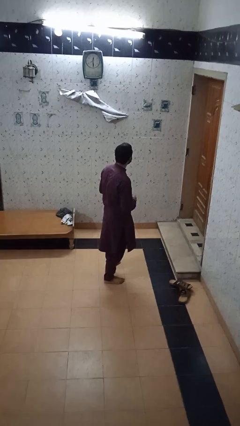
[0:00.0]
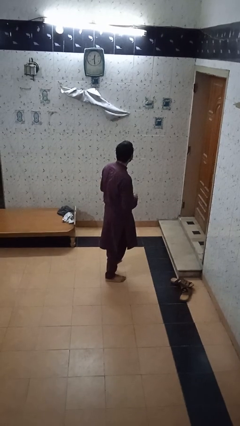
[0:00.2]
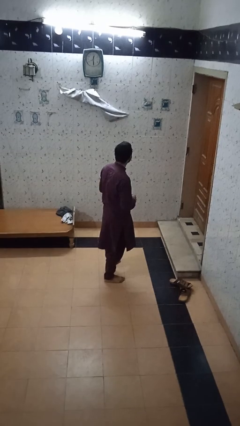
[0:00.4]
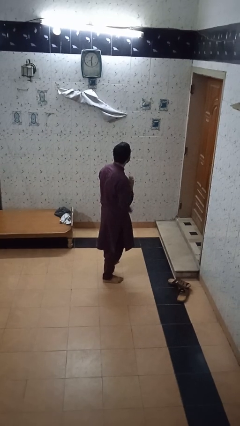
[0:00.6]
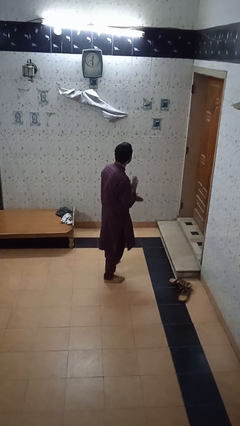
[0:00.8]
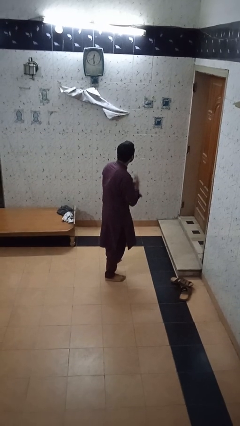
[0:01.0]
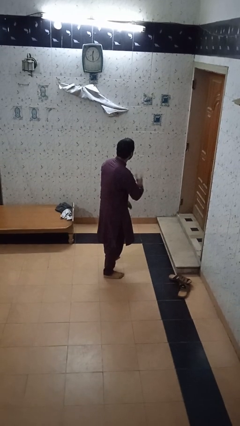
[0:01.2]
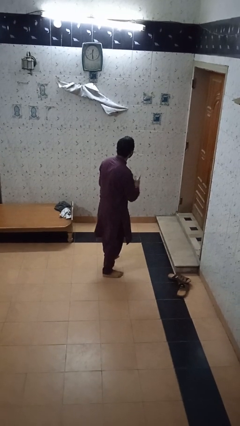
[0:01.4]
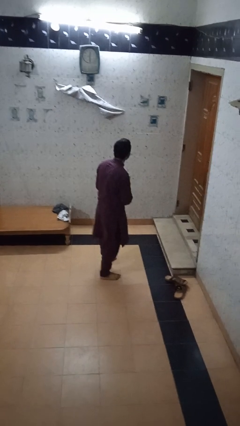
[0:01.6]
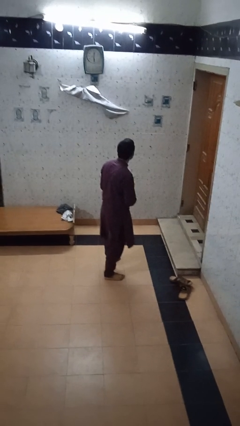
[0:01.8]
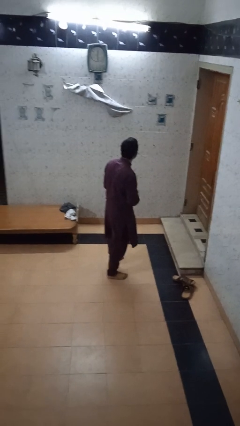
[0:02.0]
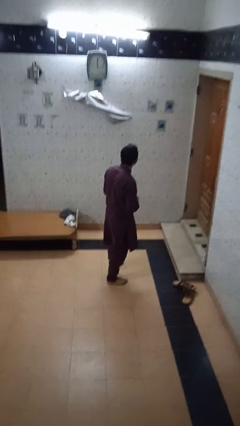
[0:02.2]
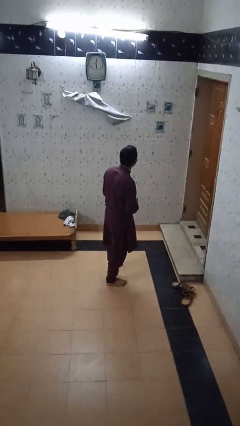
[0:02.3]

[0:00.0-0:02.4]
person karate chop

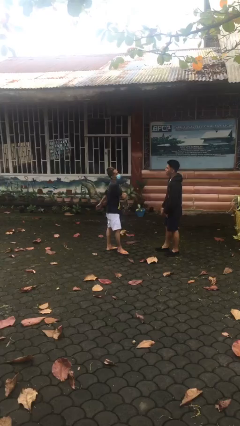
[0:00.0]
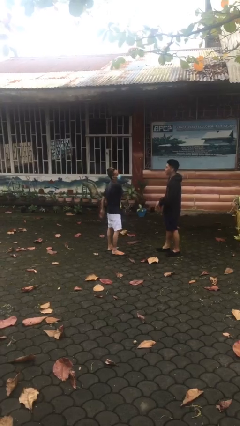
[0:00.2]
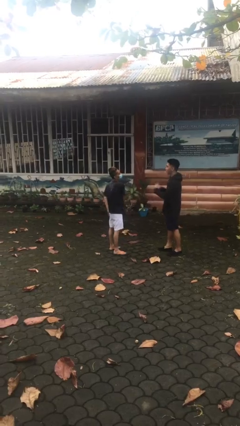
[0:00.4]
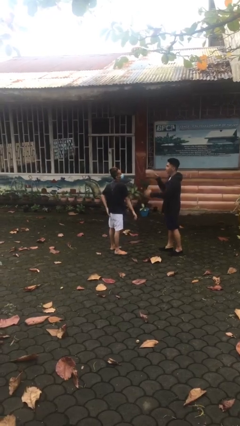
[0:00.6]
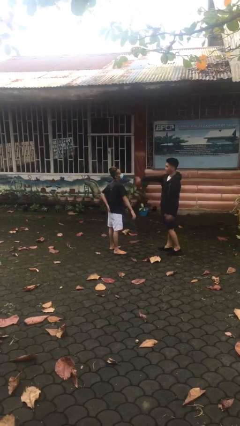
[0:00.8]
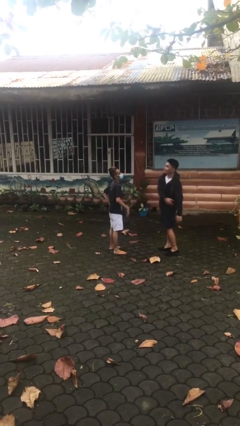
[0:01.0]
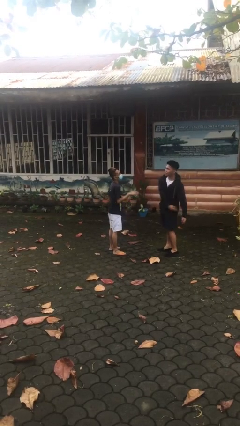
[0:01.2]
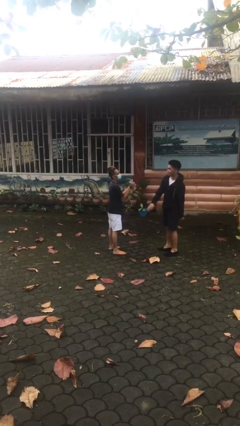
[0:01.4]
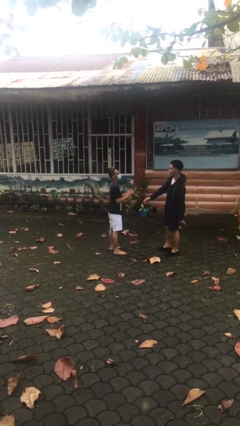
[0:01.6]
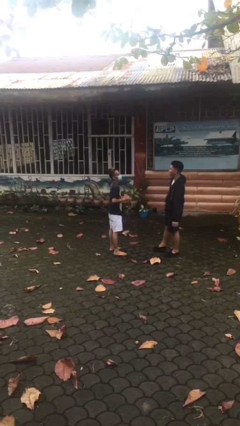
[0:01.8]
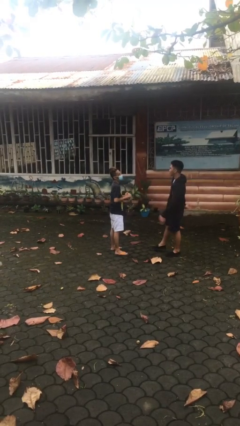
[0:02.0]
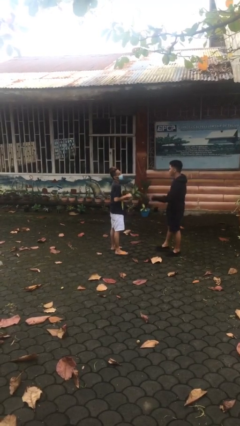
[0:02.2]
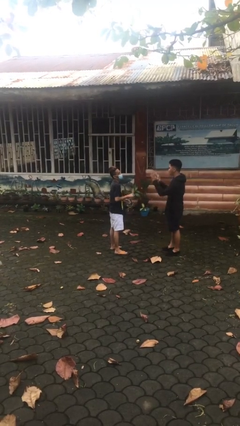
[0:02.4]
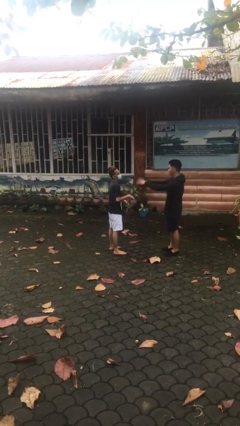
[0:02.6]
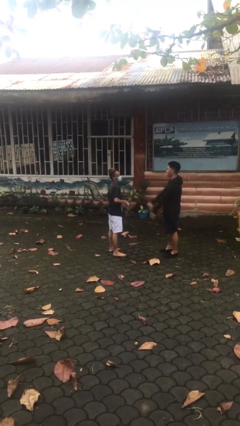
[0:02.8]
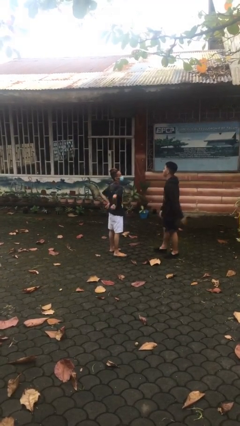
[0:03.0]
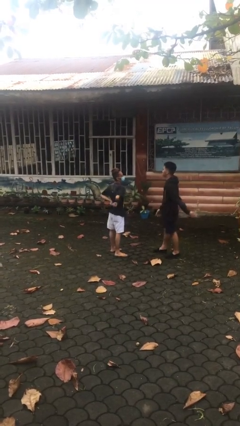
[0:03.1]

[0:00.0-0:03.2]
person talks to person

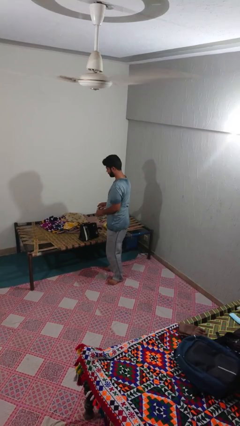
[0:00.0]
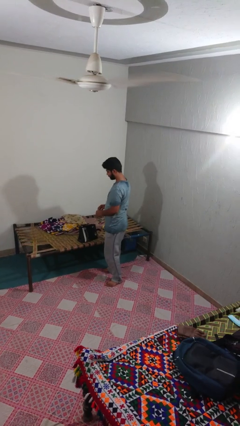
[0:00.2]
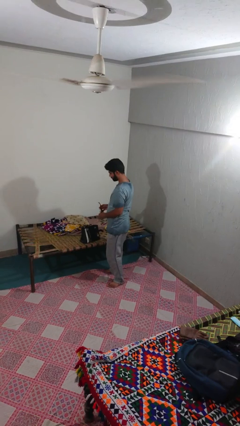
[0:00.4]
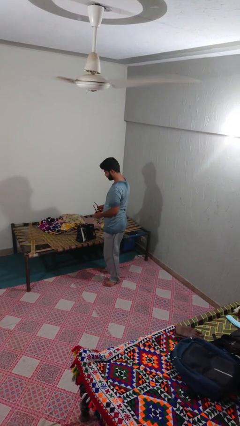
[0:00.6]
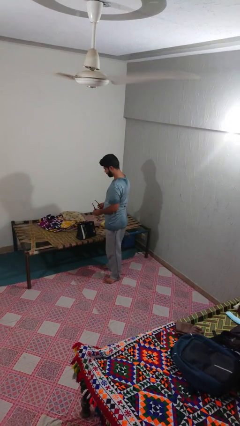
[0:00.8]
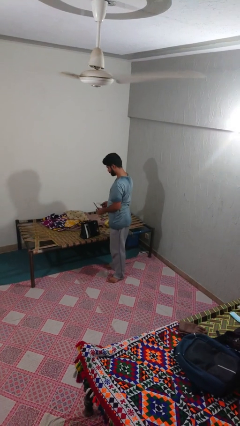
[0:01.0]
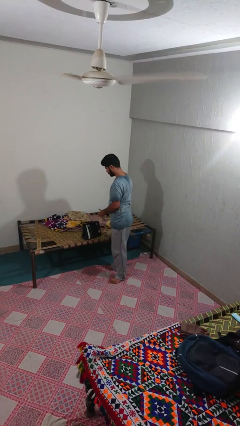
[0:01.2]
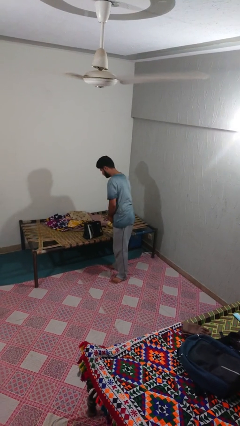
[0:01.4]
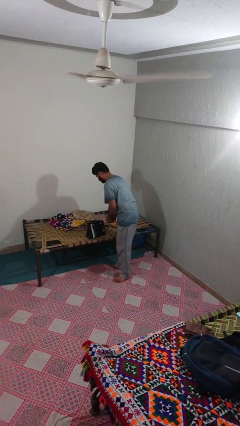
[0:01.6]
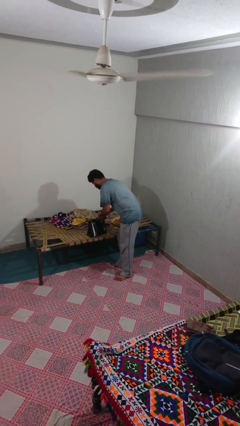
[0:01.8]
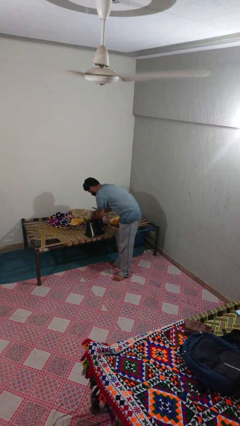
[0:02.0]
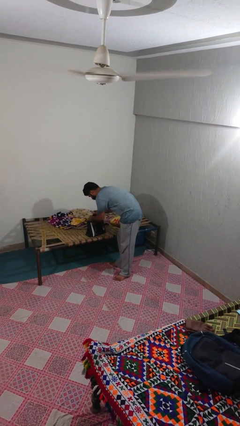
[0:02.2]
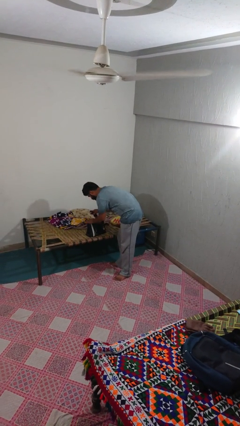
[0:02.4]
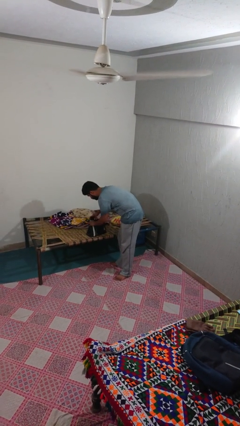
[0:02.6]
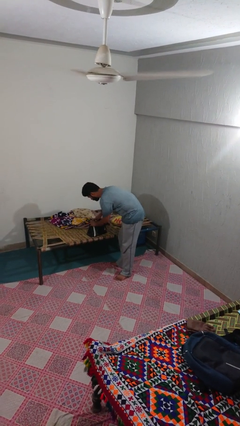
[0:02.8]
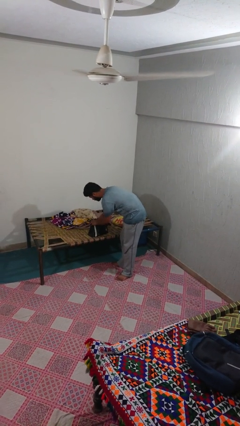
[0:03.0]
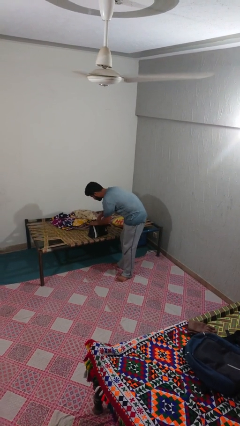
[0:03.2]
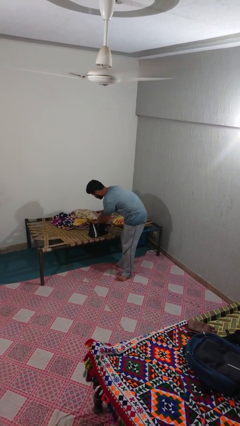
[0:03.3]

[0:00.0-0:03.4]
person puts object into purse

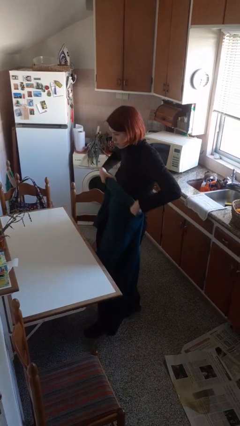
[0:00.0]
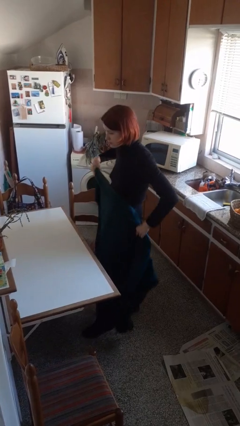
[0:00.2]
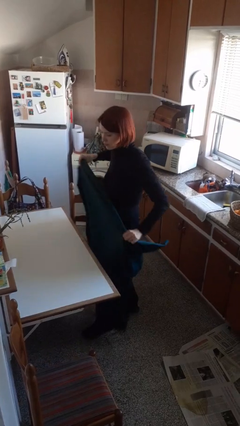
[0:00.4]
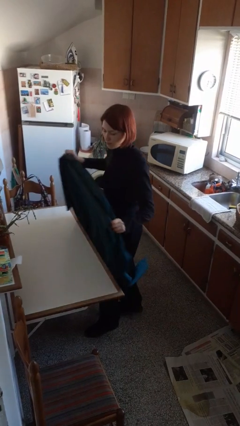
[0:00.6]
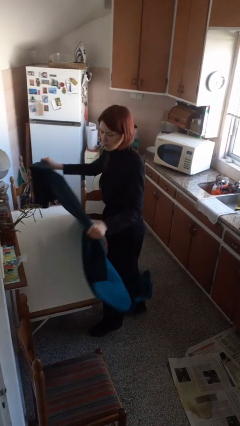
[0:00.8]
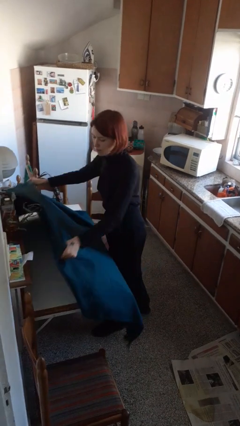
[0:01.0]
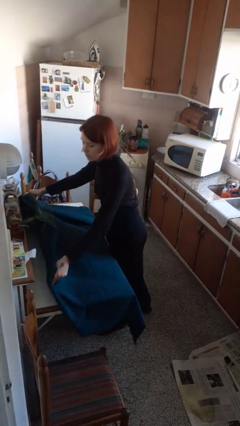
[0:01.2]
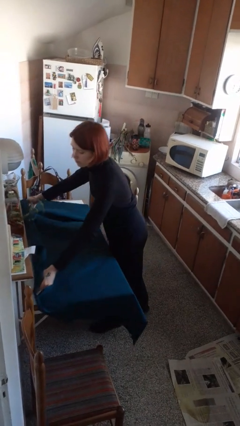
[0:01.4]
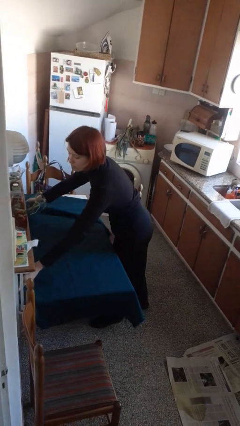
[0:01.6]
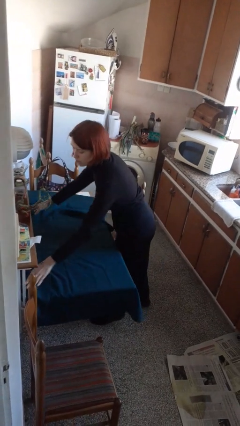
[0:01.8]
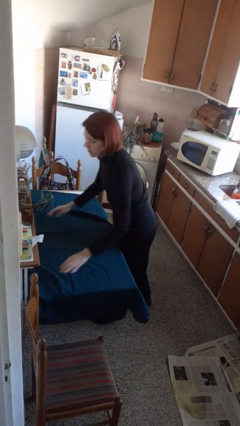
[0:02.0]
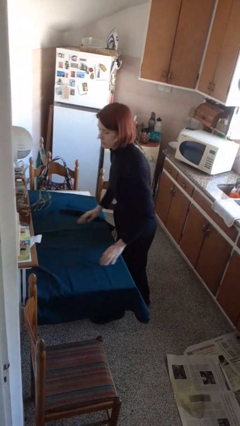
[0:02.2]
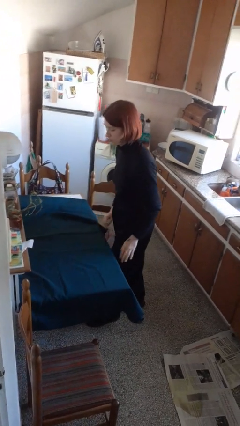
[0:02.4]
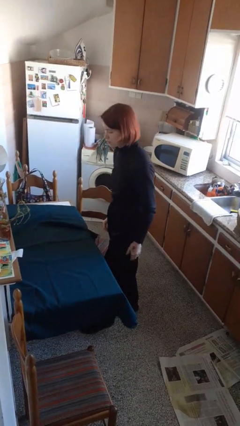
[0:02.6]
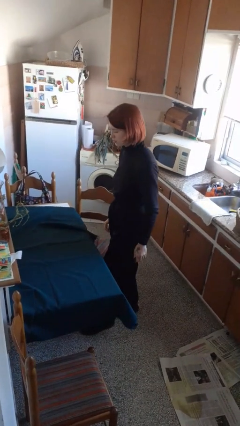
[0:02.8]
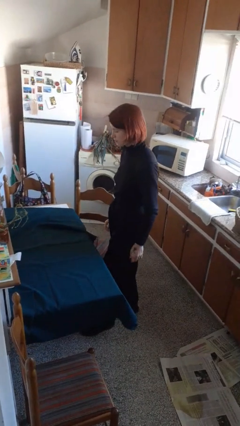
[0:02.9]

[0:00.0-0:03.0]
person spreads tablecloth

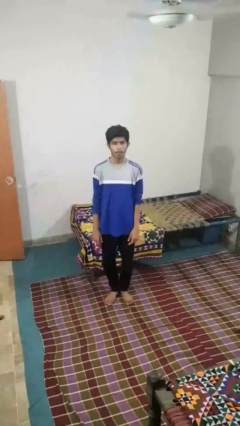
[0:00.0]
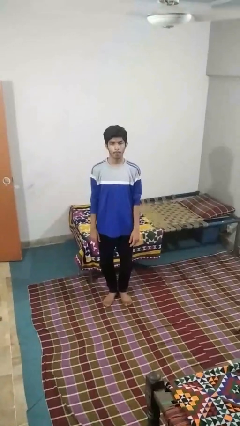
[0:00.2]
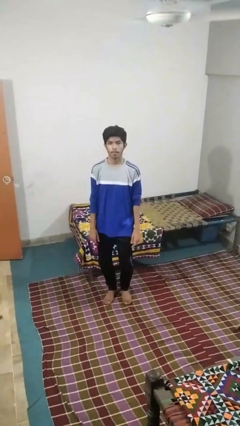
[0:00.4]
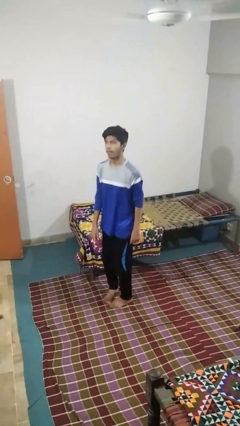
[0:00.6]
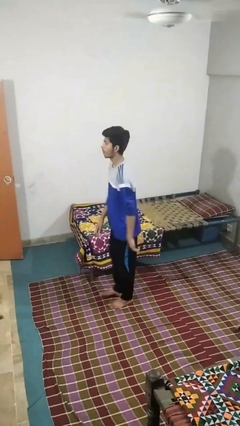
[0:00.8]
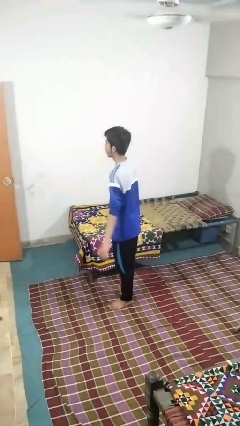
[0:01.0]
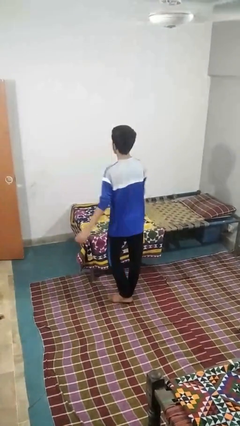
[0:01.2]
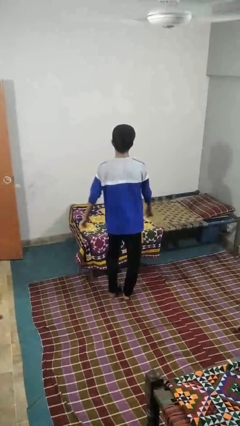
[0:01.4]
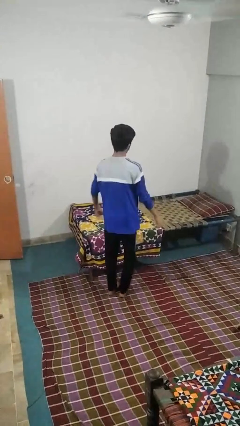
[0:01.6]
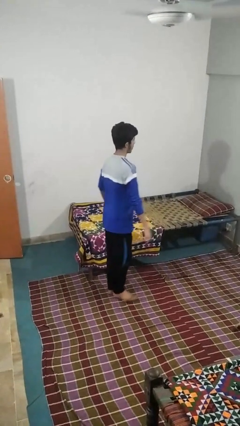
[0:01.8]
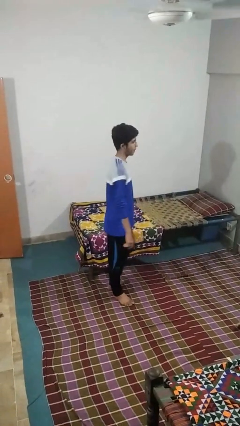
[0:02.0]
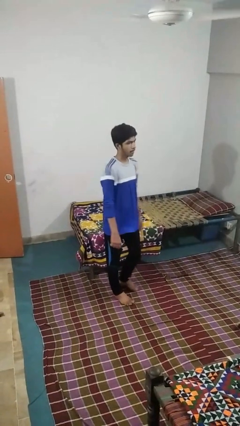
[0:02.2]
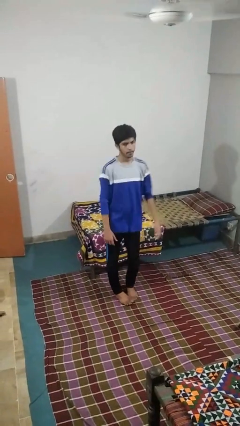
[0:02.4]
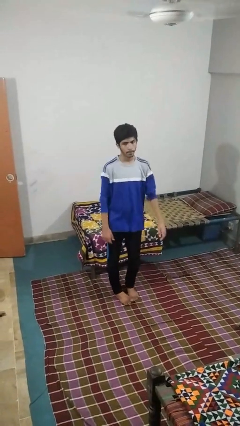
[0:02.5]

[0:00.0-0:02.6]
person twirls

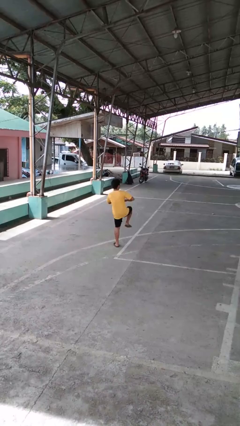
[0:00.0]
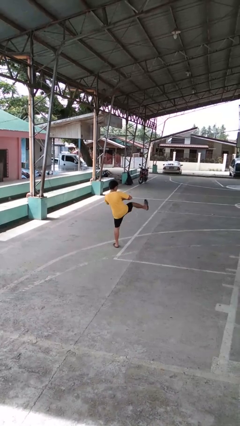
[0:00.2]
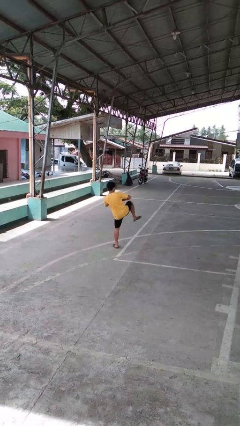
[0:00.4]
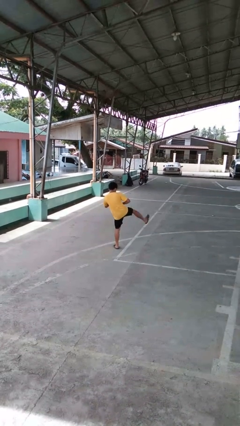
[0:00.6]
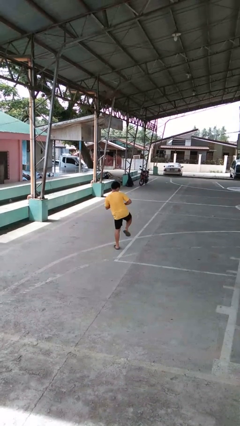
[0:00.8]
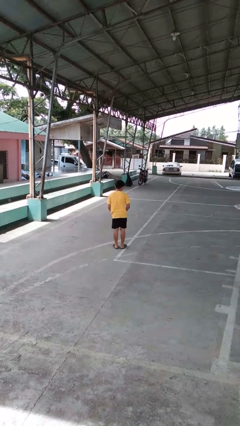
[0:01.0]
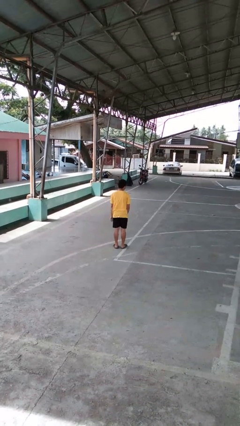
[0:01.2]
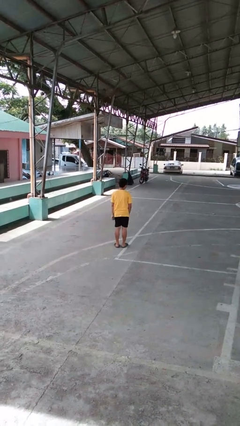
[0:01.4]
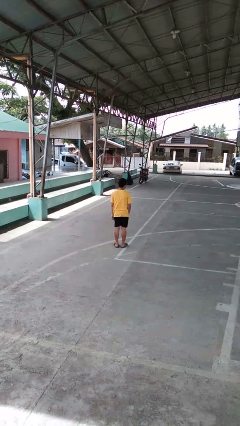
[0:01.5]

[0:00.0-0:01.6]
person karate kicks

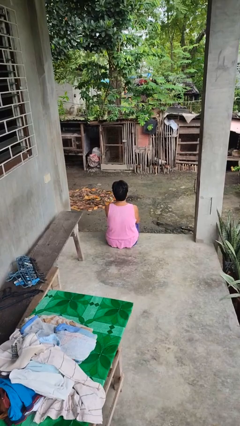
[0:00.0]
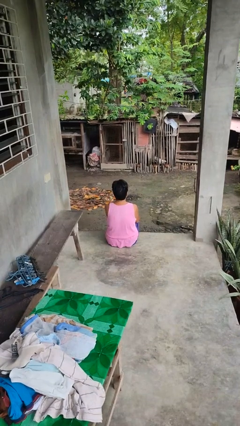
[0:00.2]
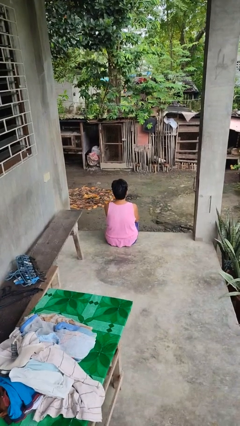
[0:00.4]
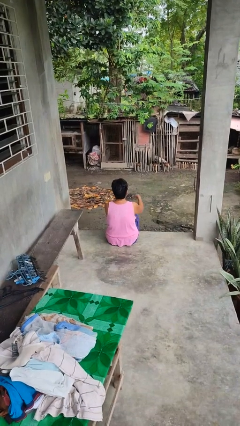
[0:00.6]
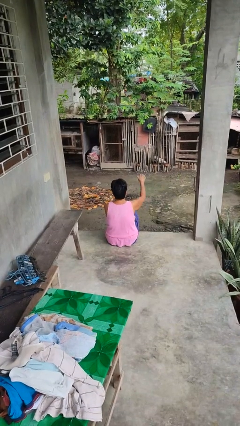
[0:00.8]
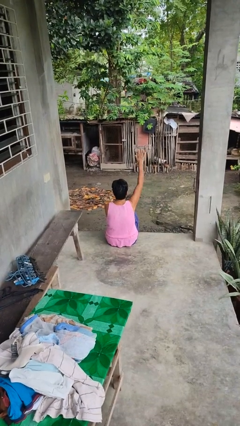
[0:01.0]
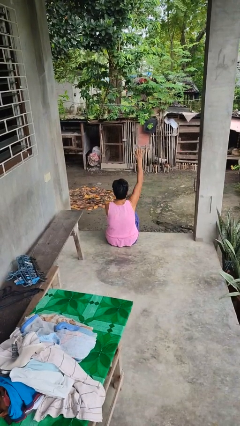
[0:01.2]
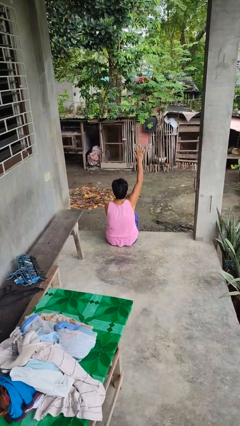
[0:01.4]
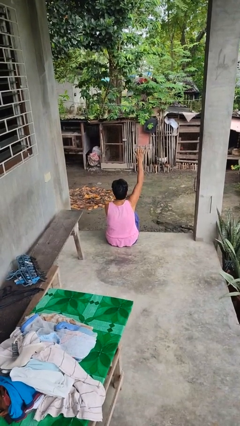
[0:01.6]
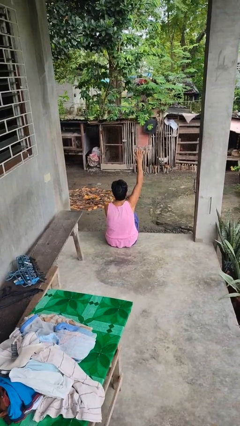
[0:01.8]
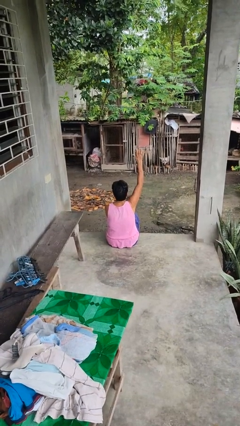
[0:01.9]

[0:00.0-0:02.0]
person gestures raise hand
